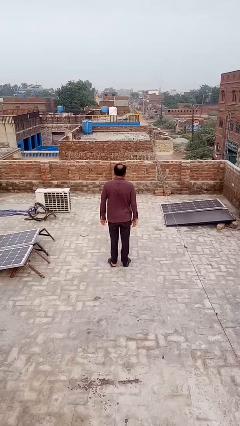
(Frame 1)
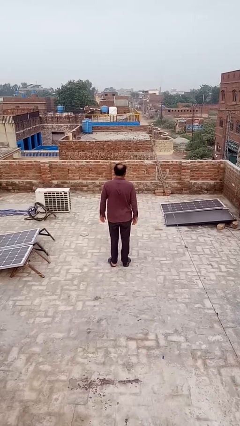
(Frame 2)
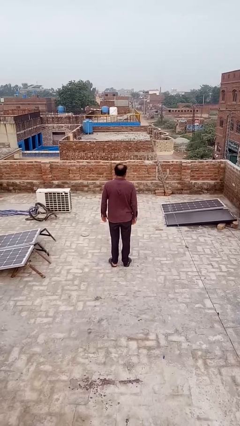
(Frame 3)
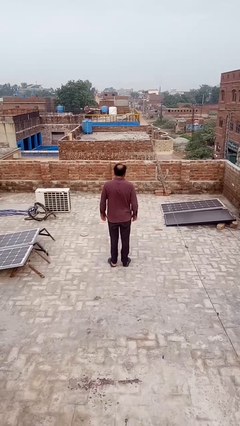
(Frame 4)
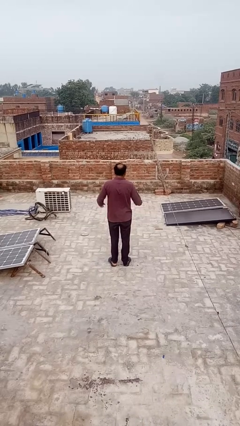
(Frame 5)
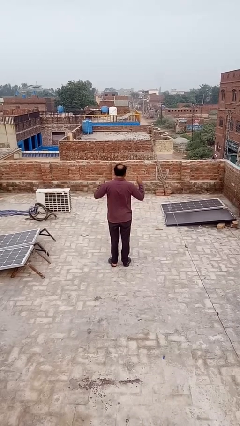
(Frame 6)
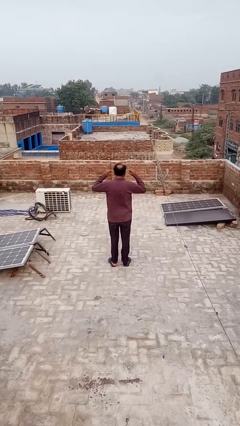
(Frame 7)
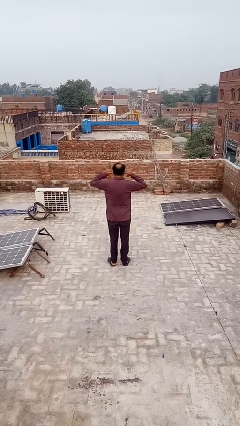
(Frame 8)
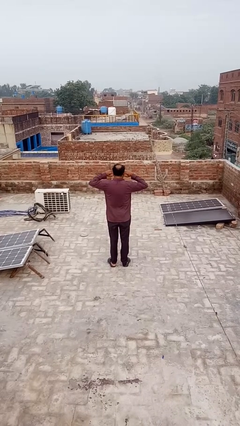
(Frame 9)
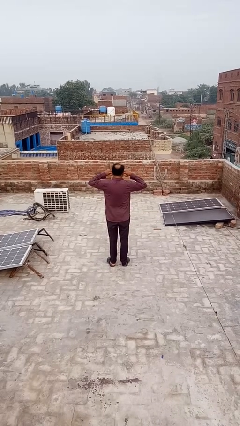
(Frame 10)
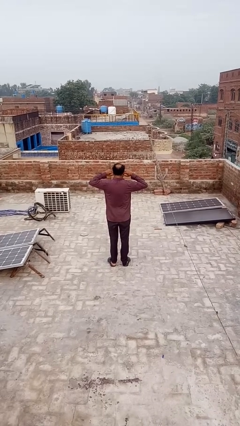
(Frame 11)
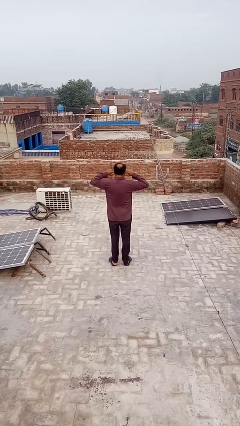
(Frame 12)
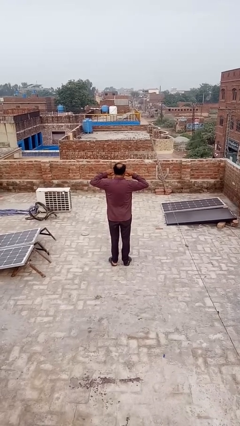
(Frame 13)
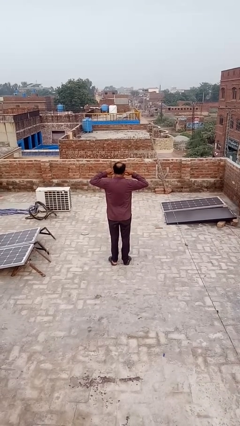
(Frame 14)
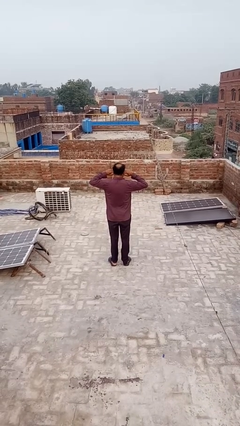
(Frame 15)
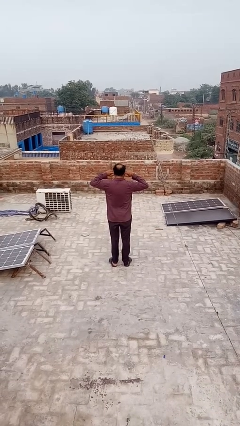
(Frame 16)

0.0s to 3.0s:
person puts fingers in ear

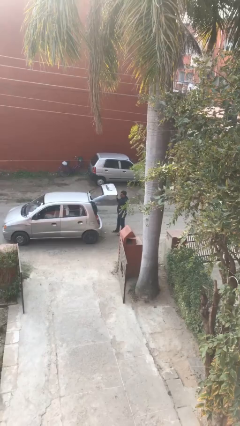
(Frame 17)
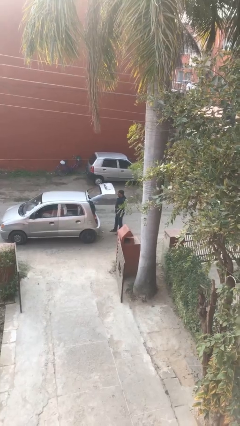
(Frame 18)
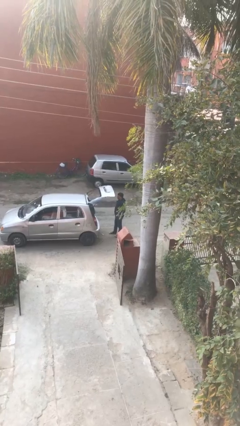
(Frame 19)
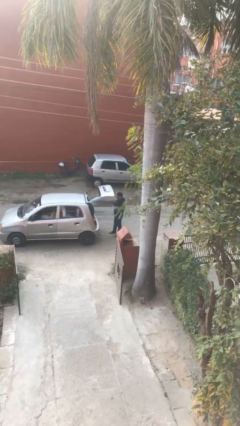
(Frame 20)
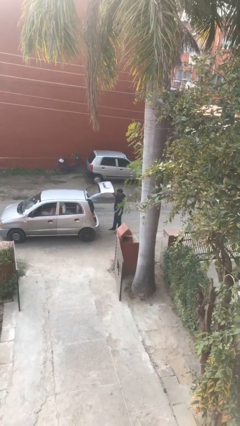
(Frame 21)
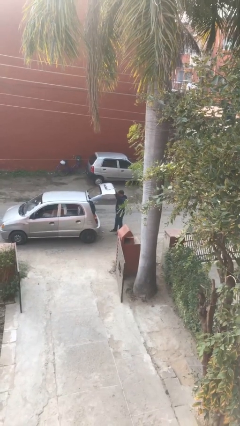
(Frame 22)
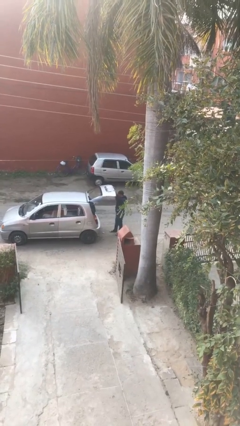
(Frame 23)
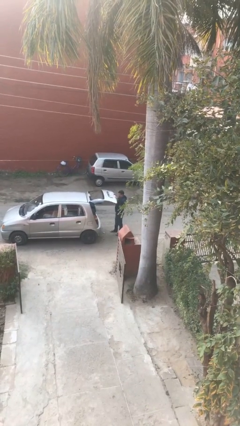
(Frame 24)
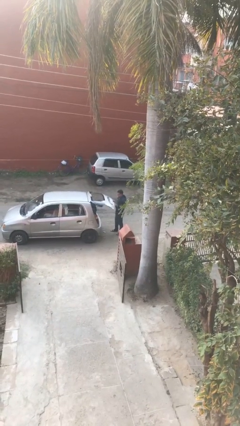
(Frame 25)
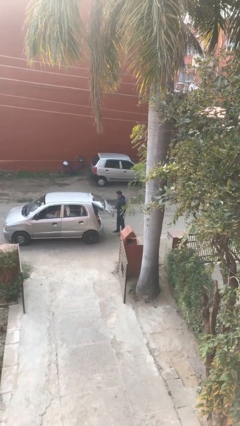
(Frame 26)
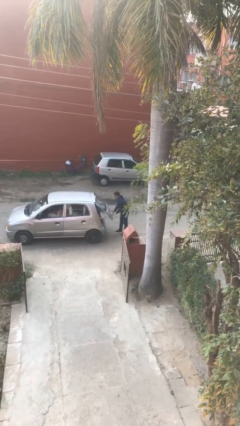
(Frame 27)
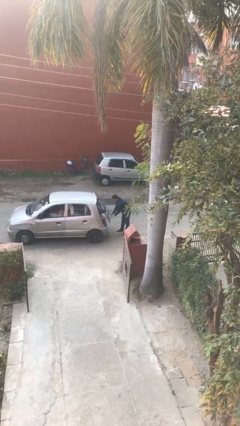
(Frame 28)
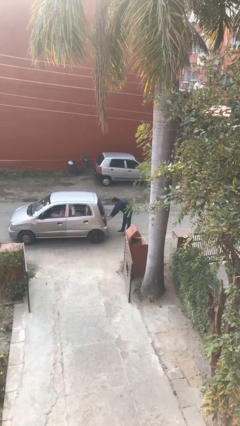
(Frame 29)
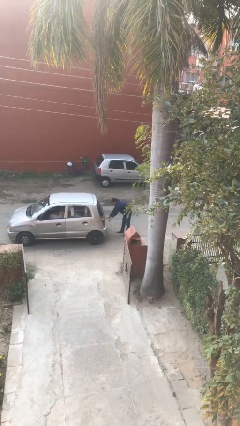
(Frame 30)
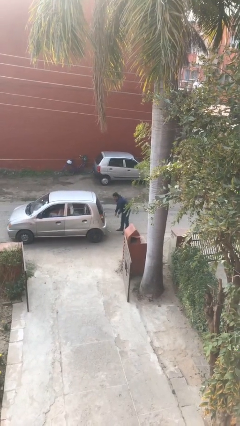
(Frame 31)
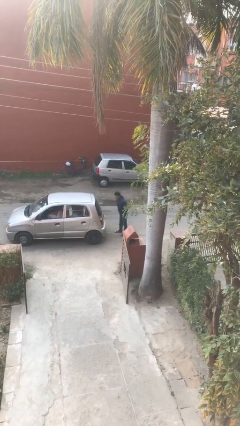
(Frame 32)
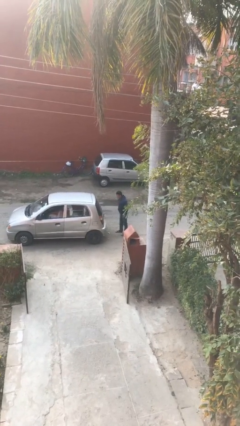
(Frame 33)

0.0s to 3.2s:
person closes car trunk

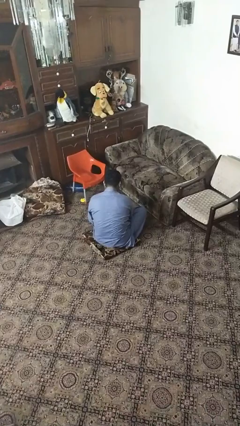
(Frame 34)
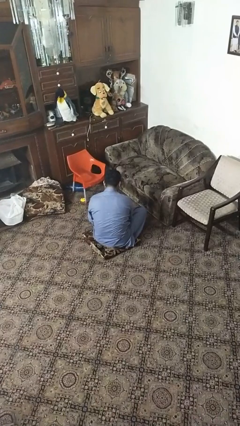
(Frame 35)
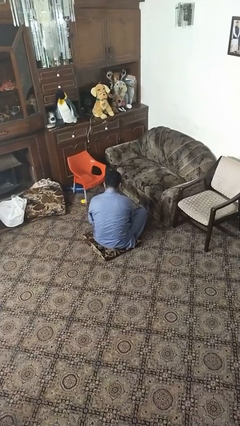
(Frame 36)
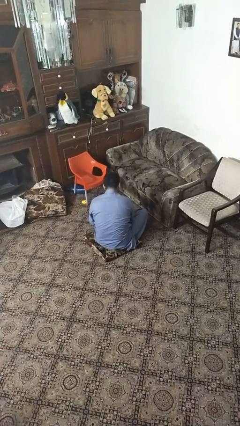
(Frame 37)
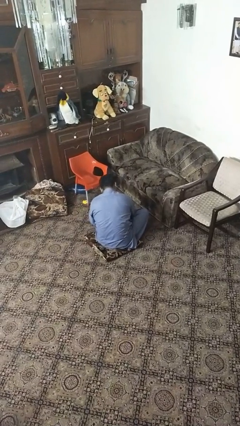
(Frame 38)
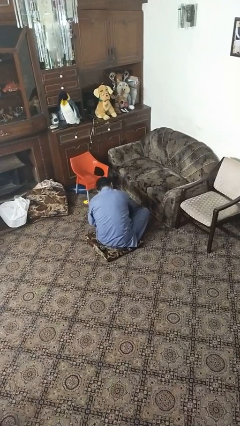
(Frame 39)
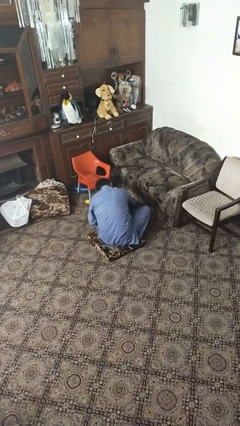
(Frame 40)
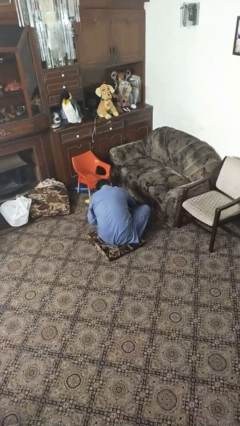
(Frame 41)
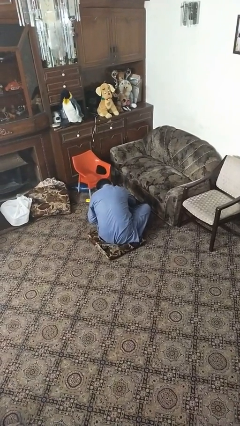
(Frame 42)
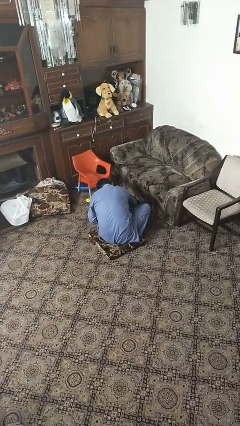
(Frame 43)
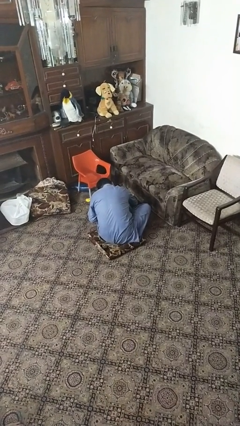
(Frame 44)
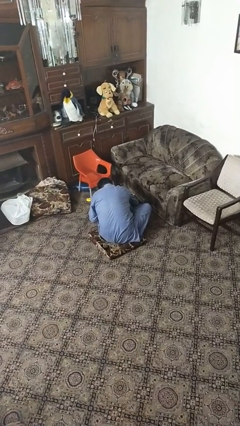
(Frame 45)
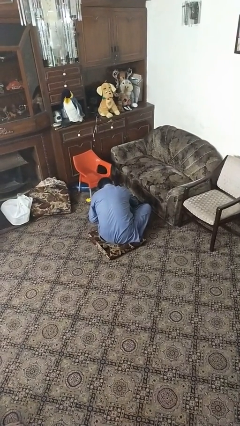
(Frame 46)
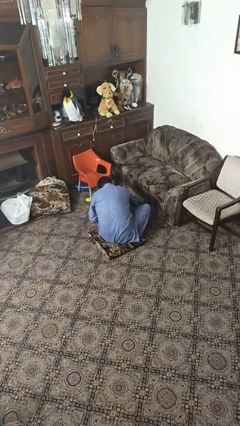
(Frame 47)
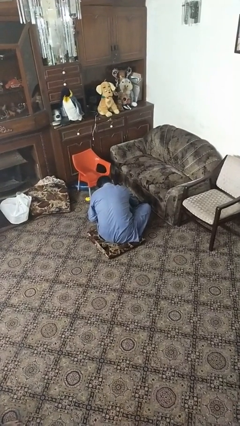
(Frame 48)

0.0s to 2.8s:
person searches under couch

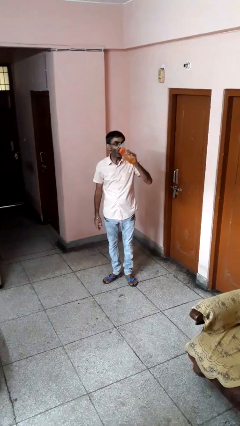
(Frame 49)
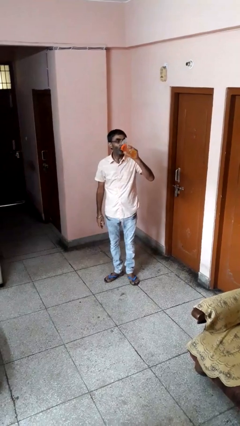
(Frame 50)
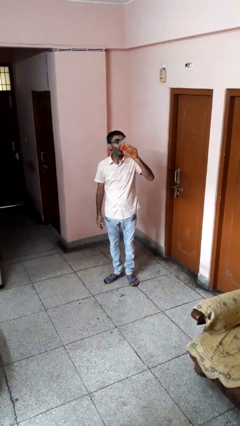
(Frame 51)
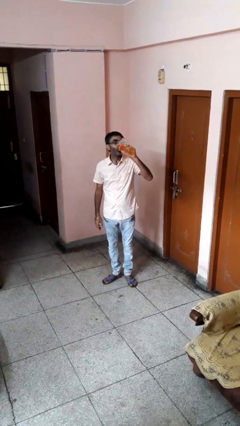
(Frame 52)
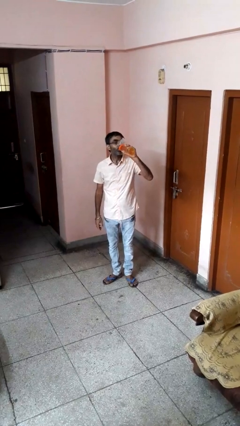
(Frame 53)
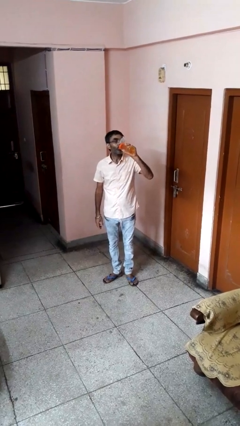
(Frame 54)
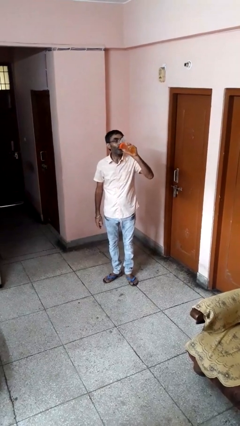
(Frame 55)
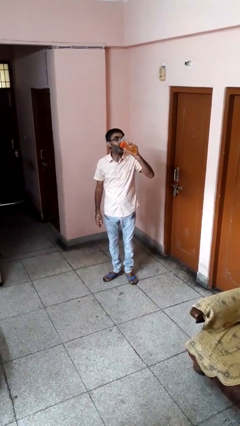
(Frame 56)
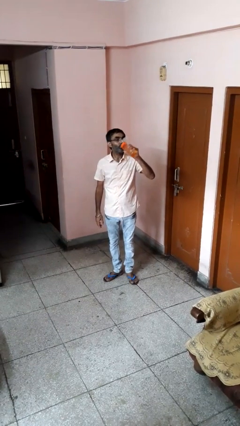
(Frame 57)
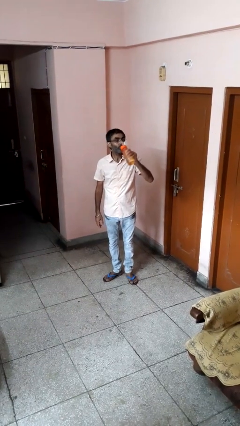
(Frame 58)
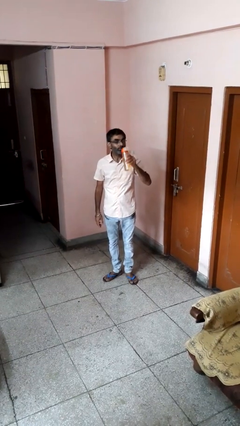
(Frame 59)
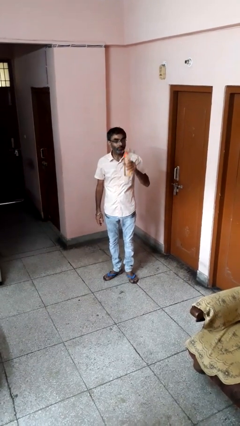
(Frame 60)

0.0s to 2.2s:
person drinks from bottle

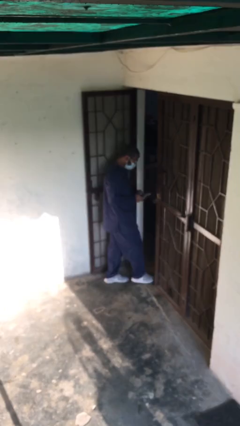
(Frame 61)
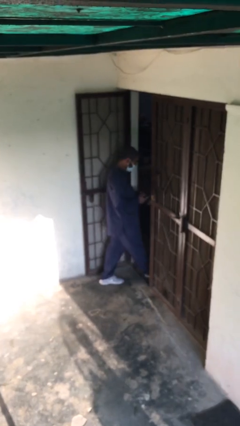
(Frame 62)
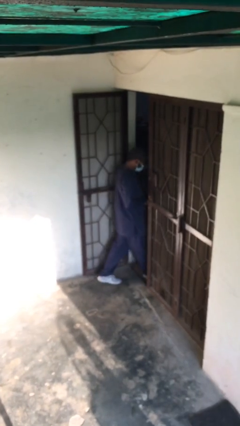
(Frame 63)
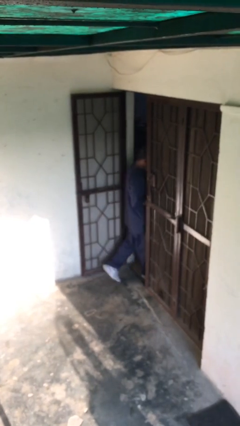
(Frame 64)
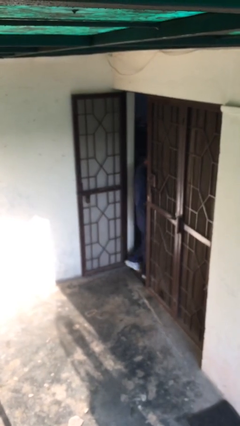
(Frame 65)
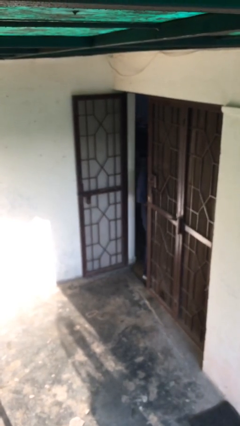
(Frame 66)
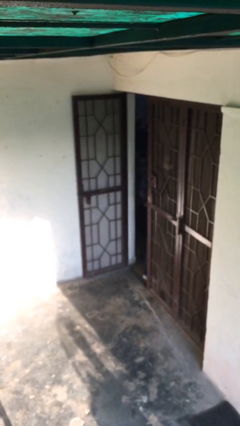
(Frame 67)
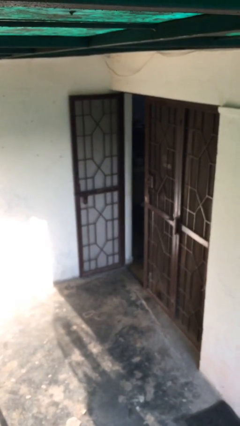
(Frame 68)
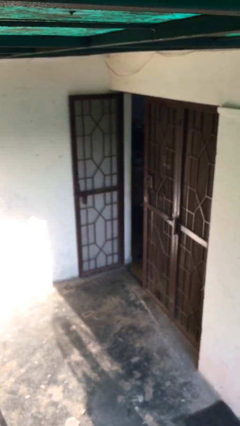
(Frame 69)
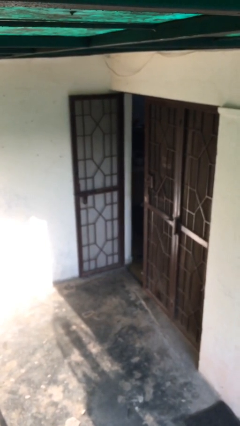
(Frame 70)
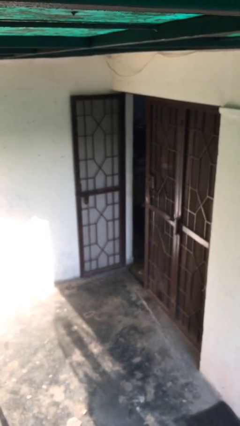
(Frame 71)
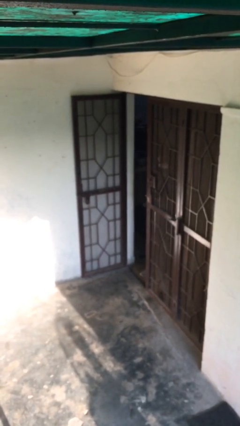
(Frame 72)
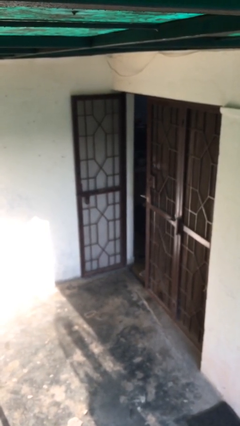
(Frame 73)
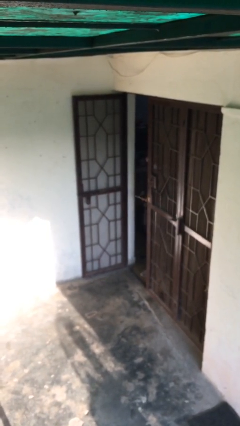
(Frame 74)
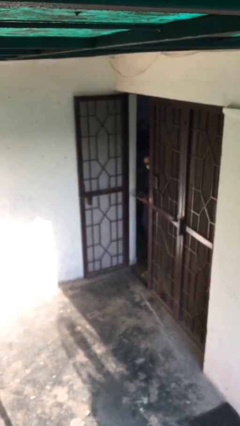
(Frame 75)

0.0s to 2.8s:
person exits scene through structure

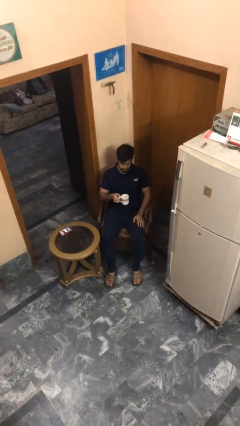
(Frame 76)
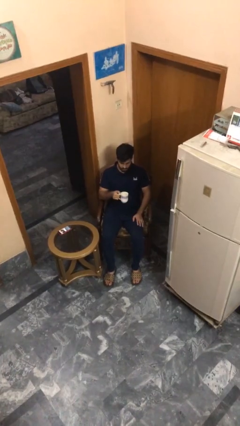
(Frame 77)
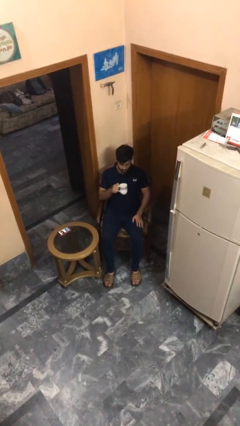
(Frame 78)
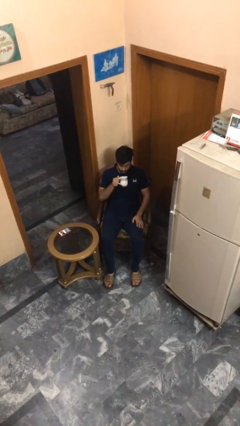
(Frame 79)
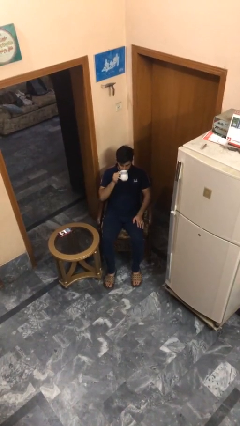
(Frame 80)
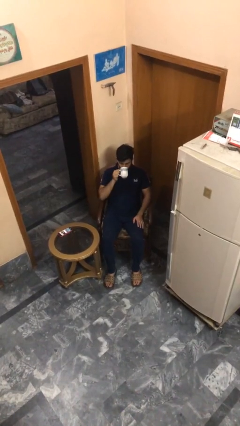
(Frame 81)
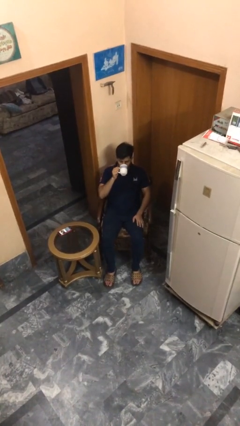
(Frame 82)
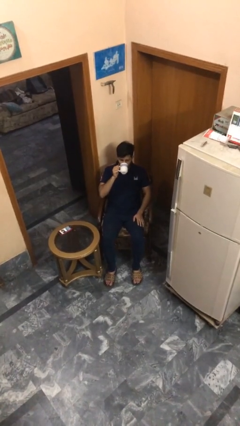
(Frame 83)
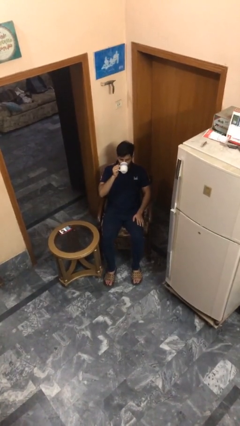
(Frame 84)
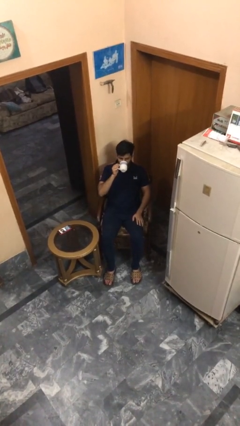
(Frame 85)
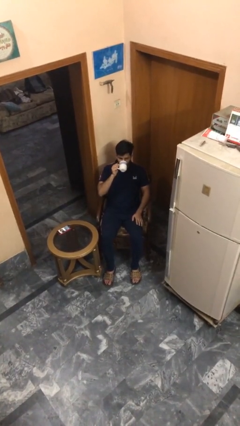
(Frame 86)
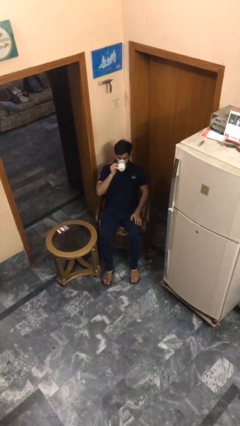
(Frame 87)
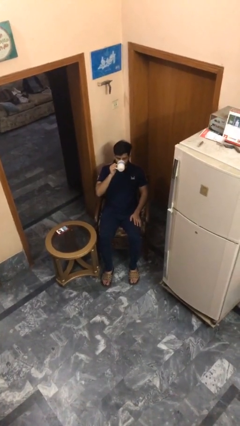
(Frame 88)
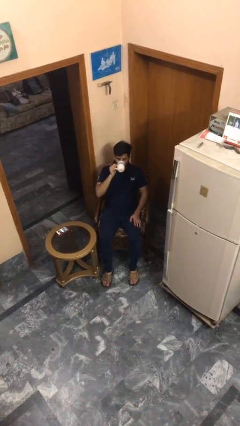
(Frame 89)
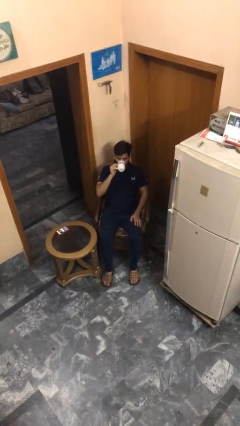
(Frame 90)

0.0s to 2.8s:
person drinks from mug
